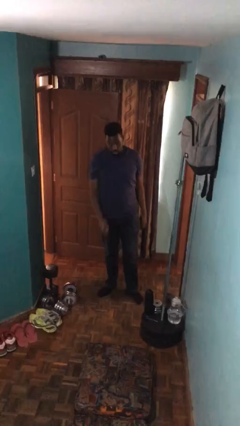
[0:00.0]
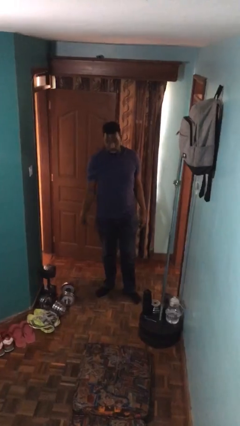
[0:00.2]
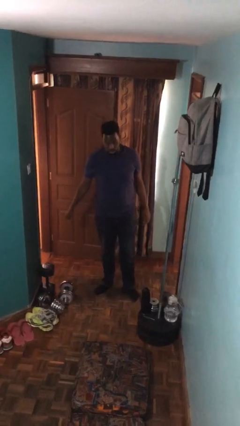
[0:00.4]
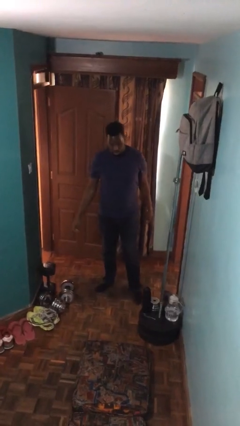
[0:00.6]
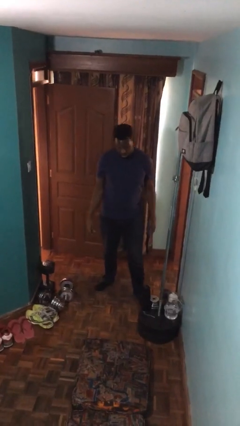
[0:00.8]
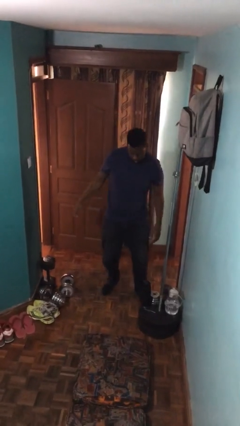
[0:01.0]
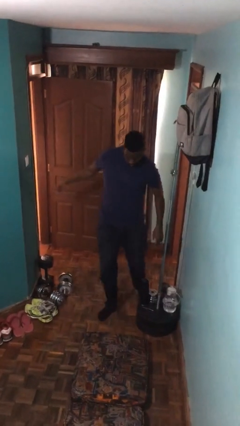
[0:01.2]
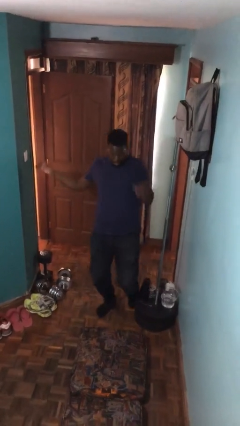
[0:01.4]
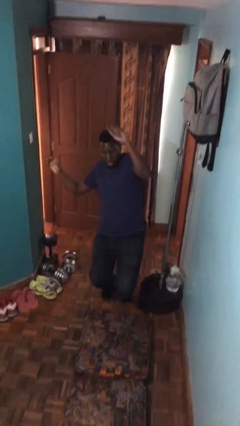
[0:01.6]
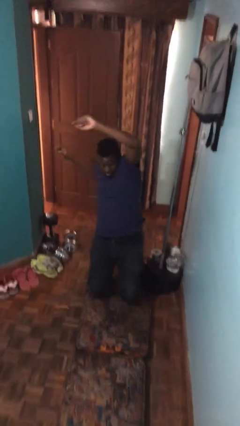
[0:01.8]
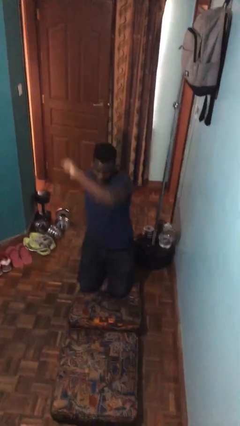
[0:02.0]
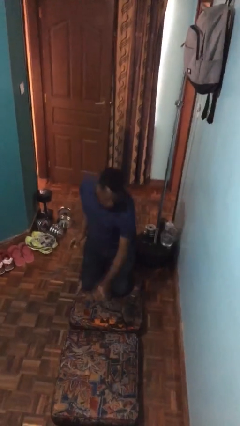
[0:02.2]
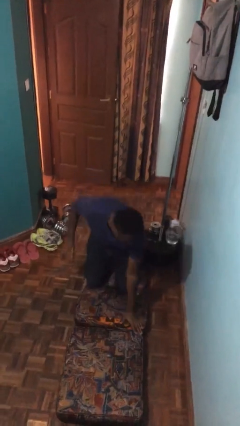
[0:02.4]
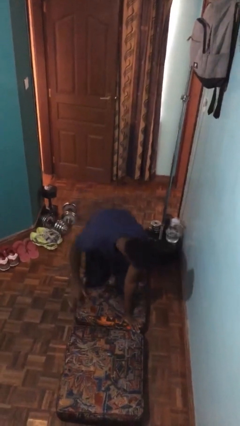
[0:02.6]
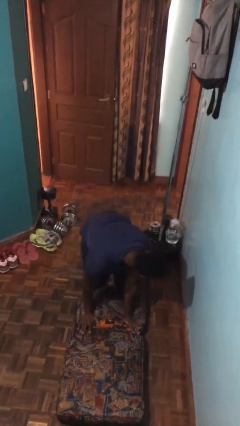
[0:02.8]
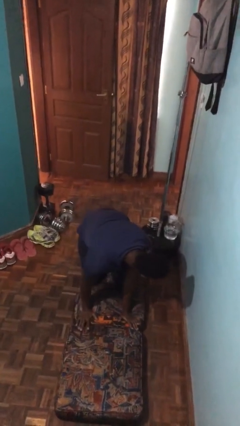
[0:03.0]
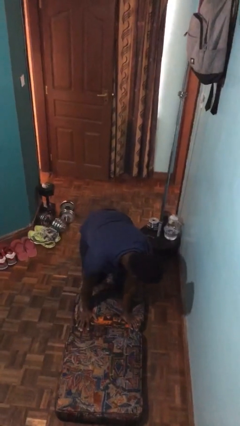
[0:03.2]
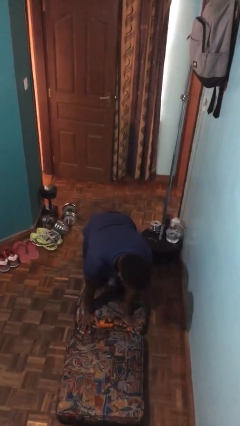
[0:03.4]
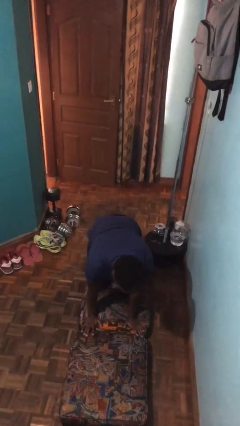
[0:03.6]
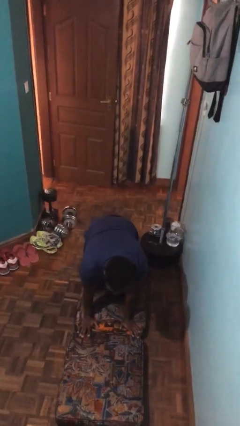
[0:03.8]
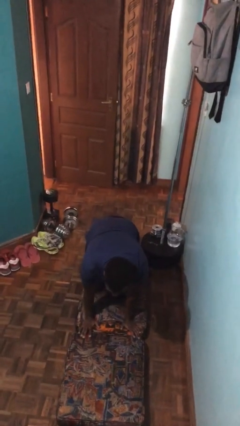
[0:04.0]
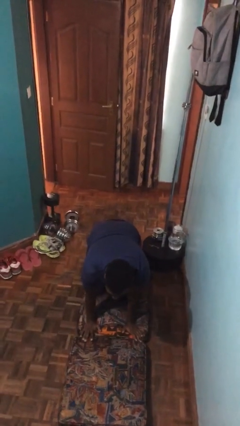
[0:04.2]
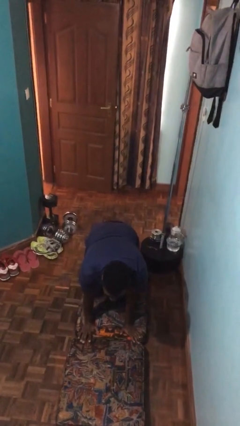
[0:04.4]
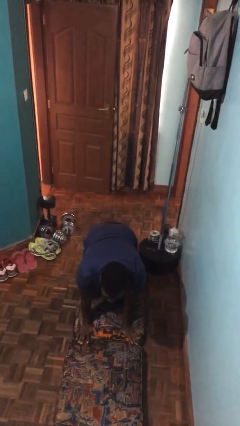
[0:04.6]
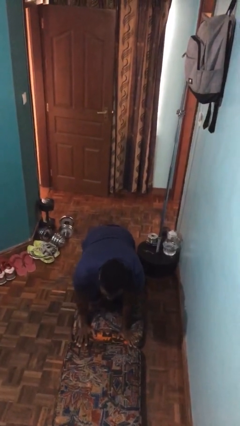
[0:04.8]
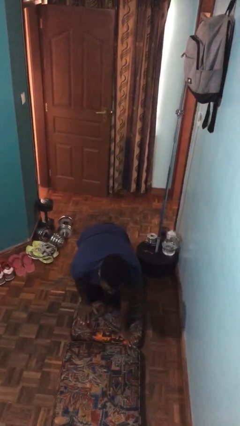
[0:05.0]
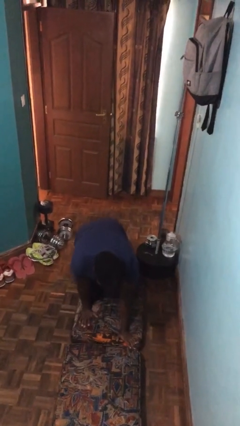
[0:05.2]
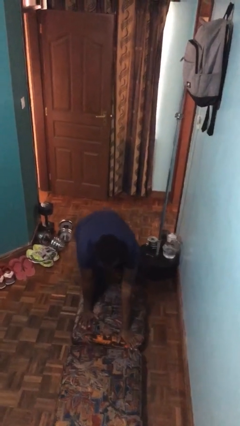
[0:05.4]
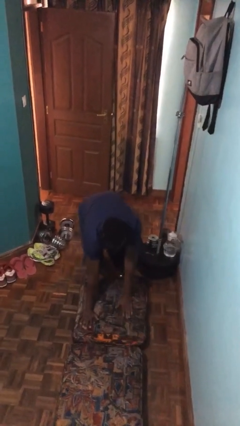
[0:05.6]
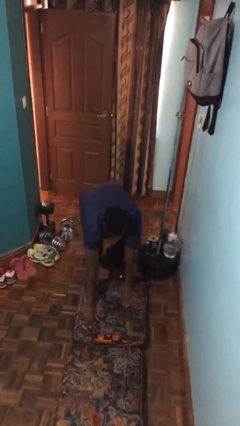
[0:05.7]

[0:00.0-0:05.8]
person trips on object on floor

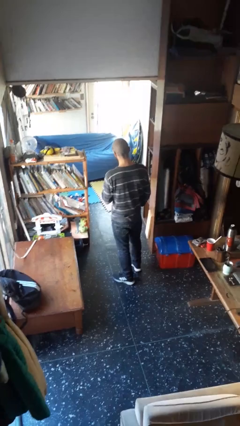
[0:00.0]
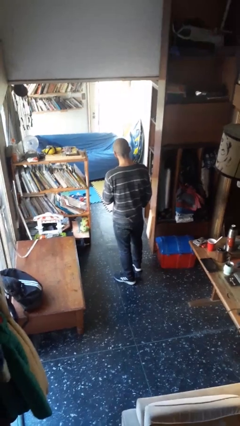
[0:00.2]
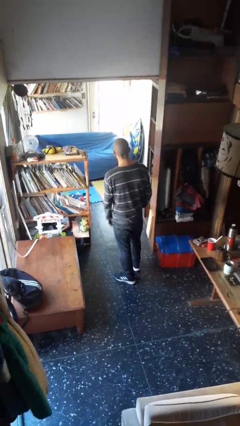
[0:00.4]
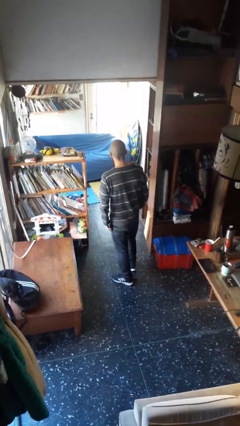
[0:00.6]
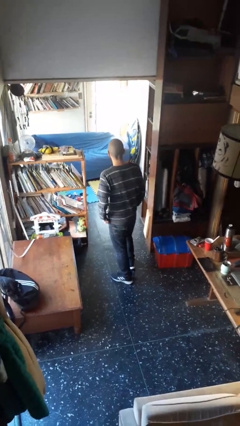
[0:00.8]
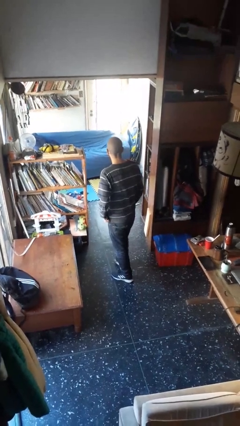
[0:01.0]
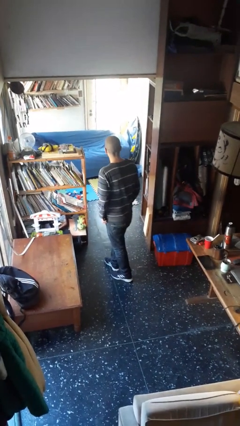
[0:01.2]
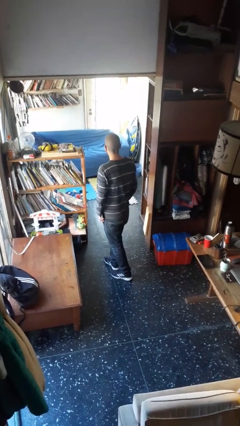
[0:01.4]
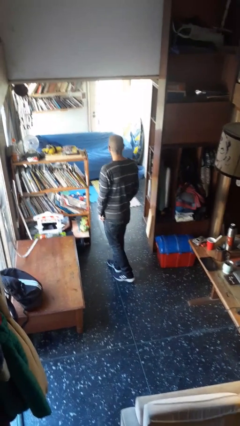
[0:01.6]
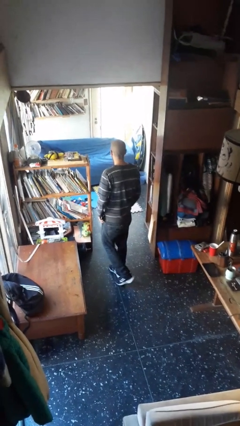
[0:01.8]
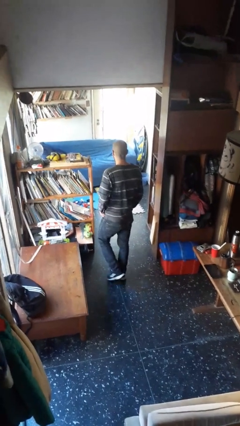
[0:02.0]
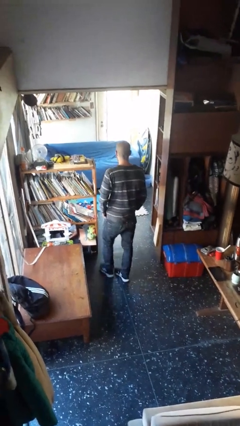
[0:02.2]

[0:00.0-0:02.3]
person puts phone into pocket

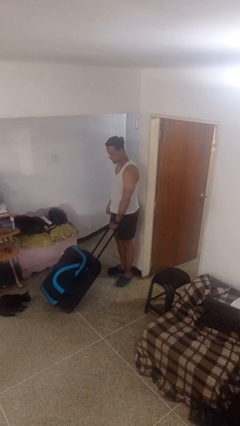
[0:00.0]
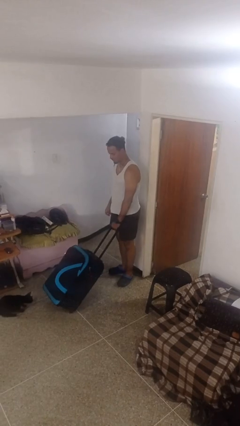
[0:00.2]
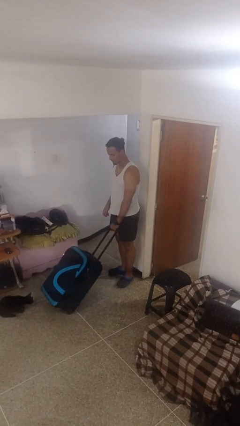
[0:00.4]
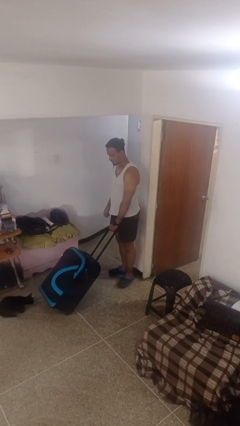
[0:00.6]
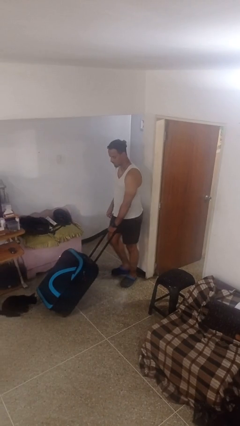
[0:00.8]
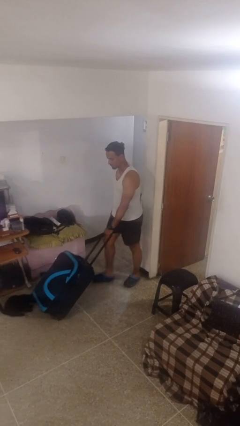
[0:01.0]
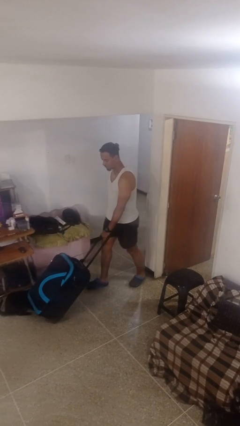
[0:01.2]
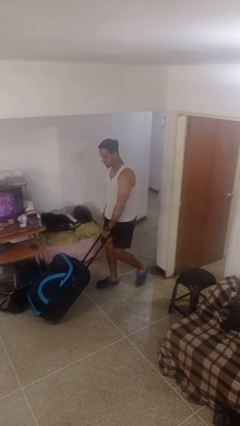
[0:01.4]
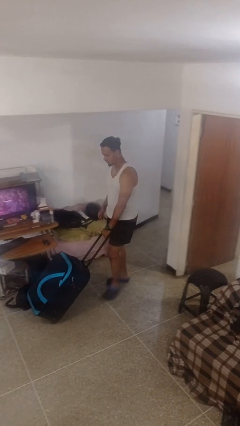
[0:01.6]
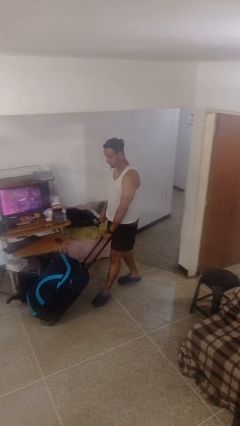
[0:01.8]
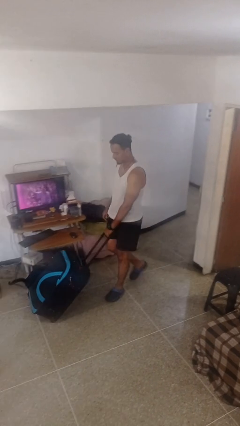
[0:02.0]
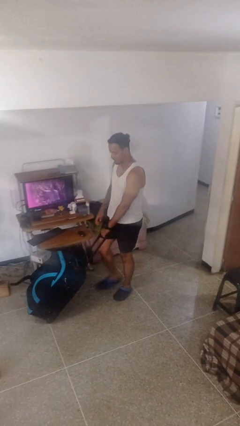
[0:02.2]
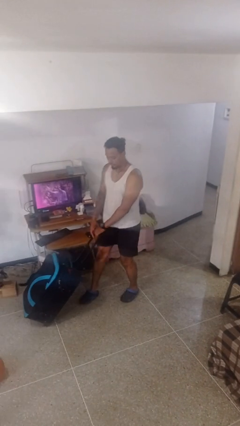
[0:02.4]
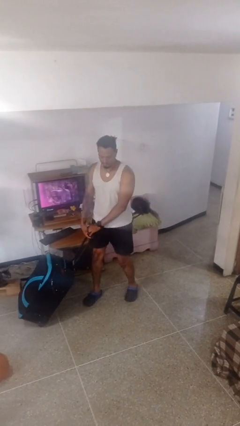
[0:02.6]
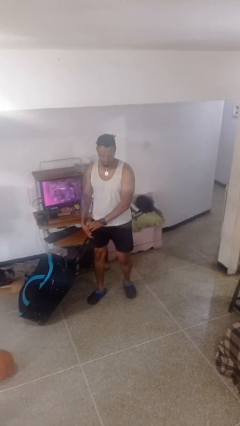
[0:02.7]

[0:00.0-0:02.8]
person pushes wheeled cart

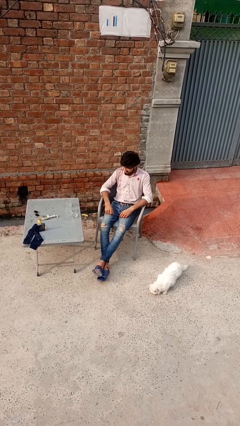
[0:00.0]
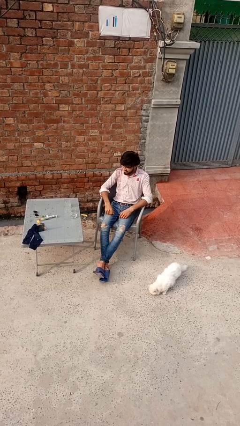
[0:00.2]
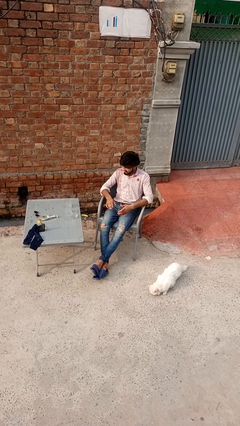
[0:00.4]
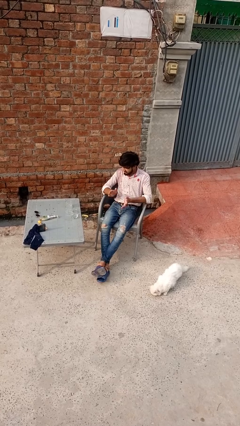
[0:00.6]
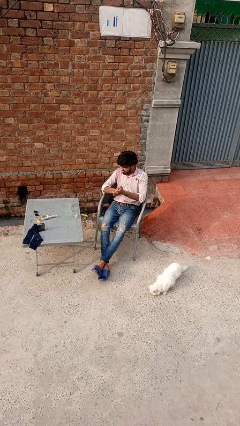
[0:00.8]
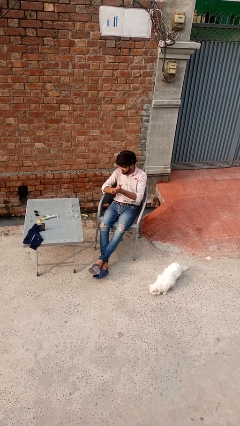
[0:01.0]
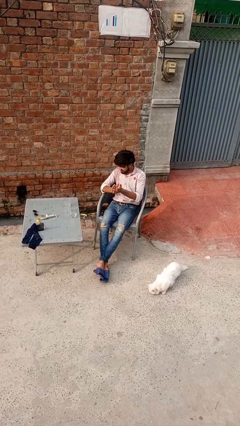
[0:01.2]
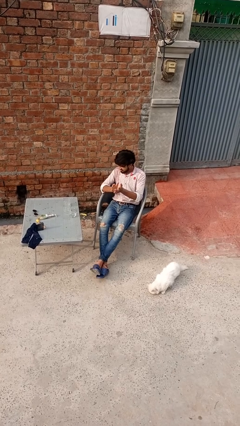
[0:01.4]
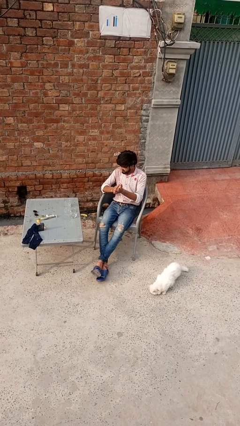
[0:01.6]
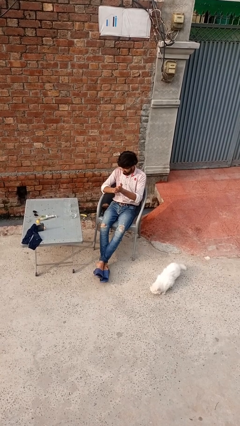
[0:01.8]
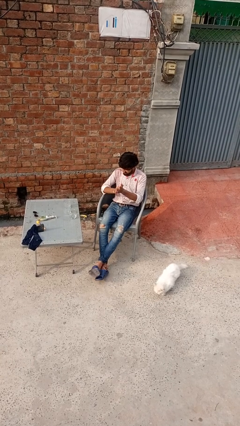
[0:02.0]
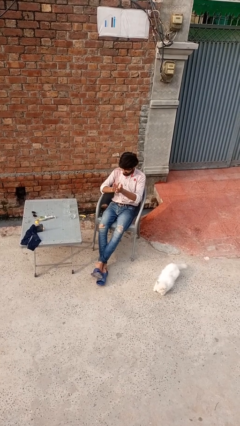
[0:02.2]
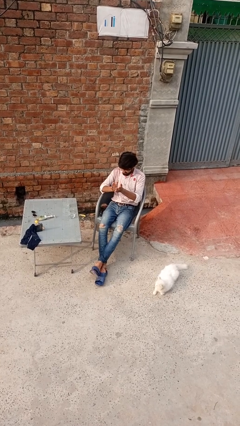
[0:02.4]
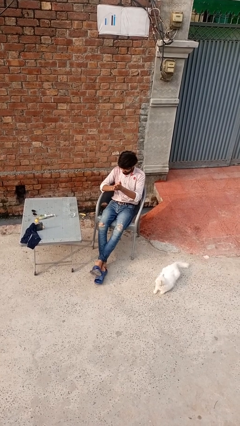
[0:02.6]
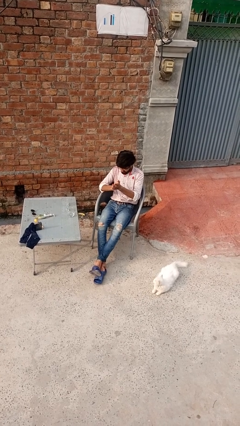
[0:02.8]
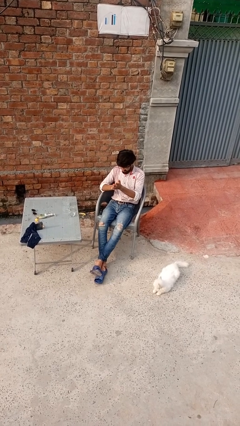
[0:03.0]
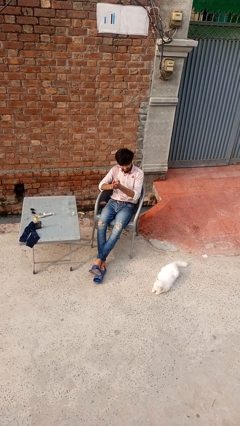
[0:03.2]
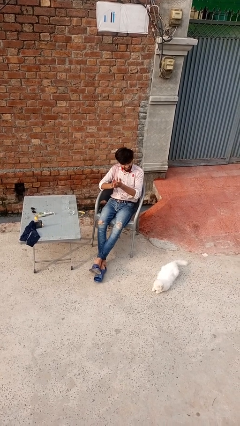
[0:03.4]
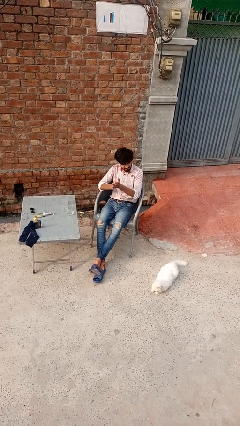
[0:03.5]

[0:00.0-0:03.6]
person claps hands

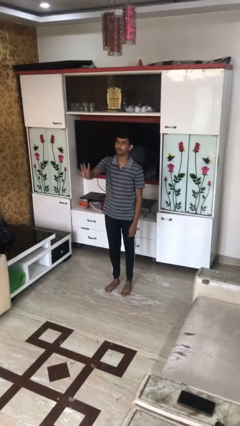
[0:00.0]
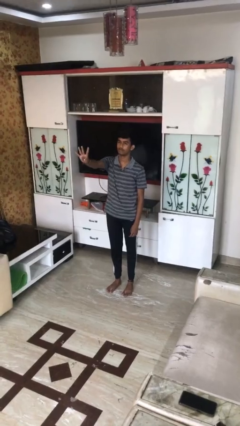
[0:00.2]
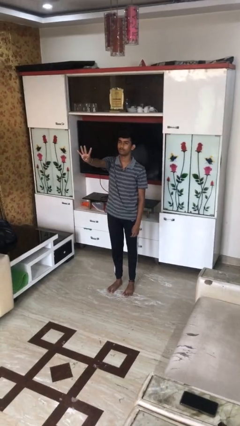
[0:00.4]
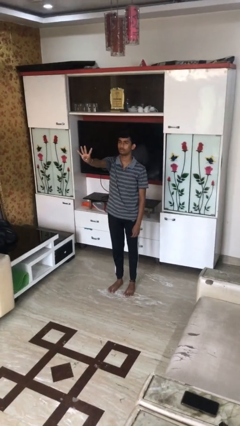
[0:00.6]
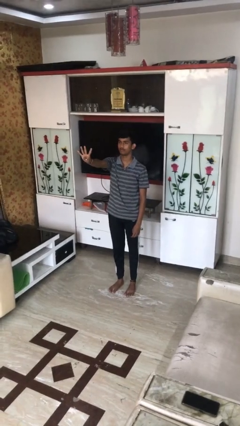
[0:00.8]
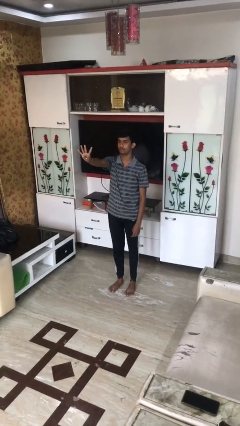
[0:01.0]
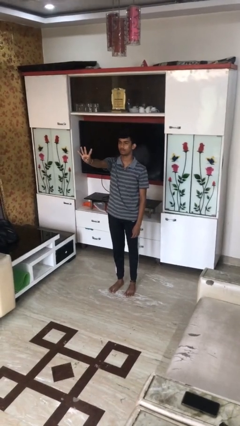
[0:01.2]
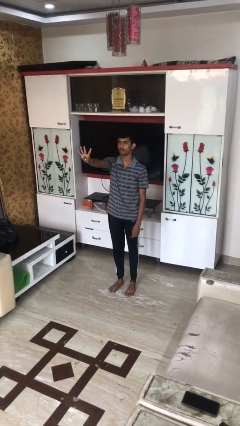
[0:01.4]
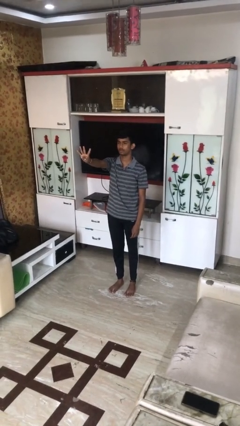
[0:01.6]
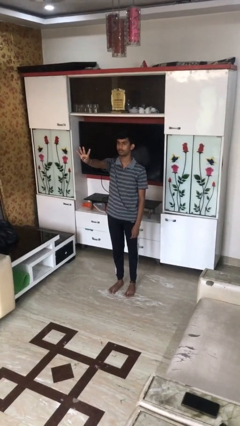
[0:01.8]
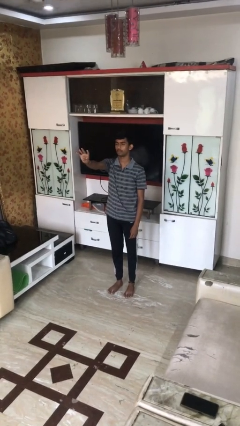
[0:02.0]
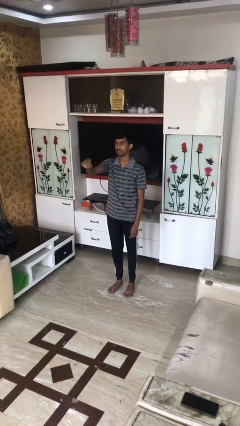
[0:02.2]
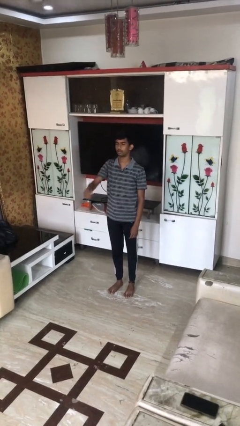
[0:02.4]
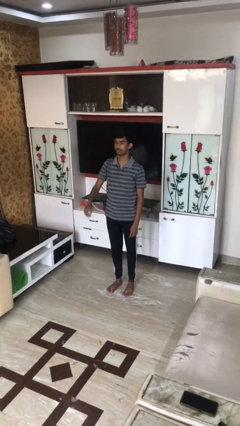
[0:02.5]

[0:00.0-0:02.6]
person gestures number four

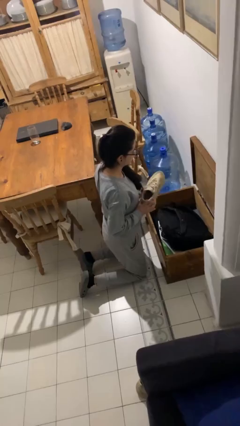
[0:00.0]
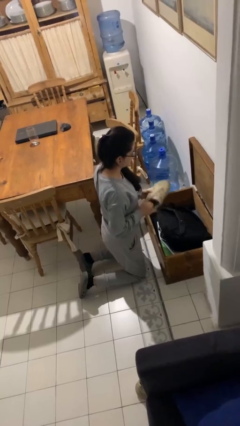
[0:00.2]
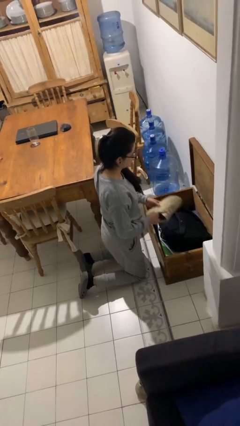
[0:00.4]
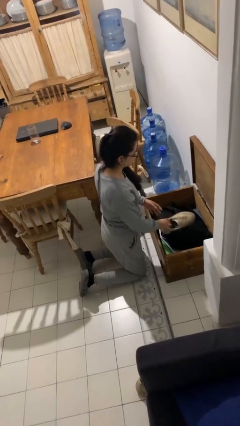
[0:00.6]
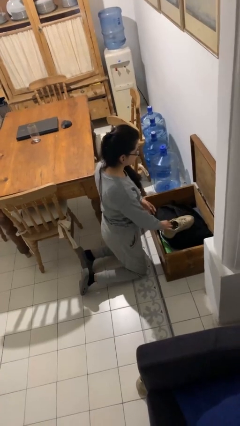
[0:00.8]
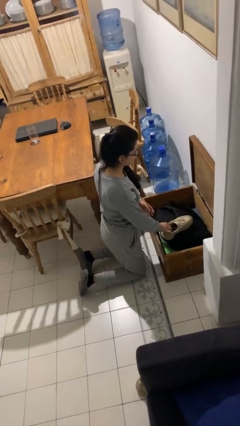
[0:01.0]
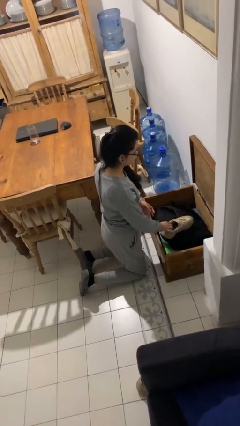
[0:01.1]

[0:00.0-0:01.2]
person puts object into box
